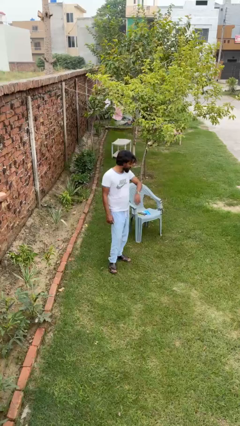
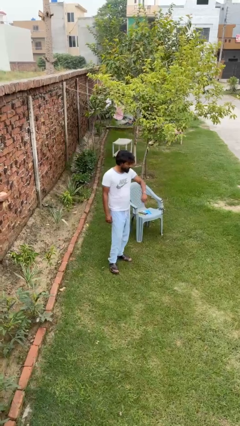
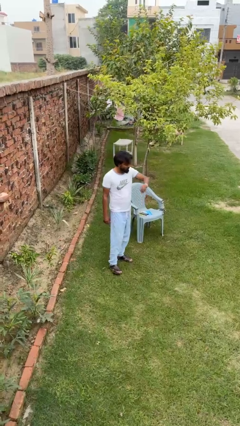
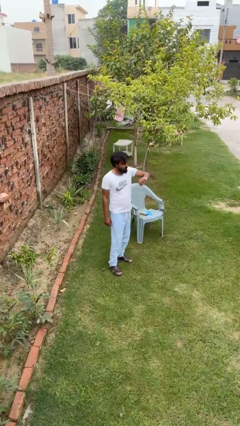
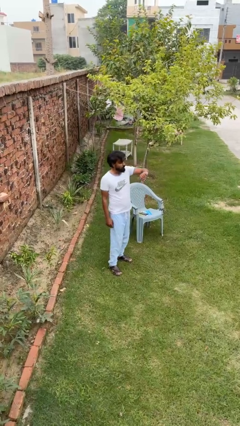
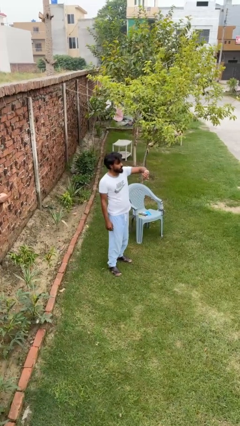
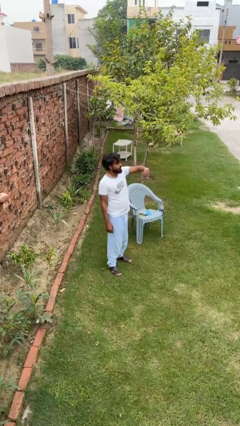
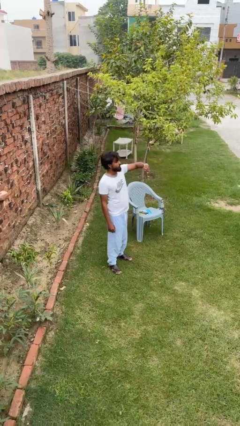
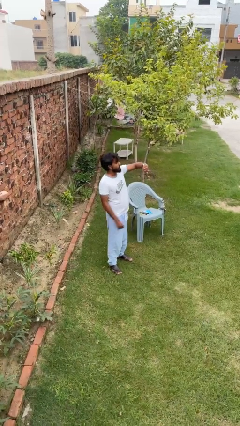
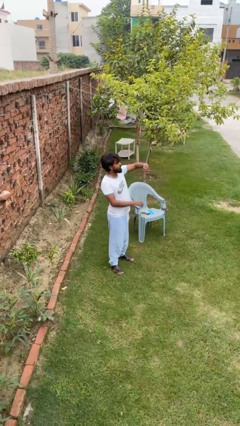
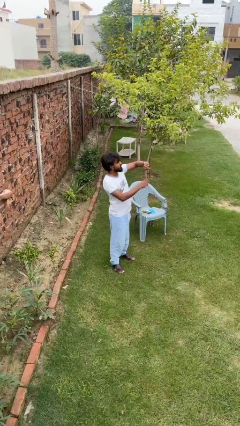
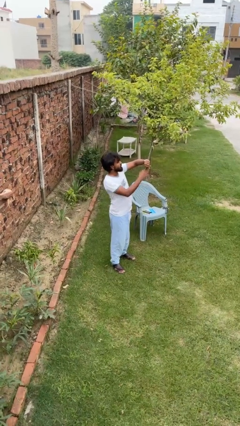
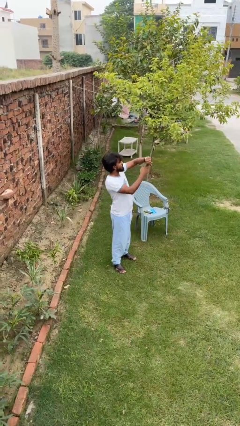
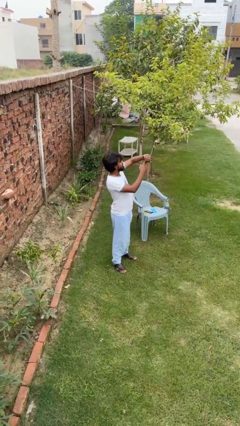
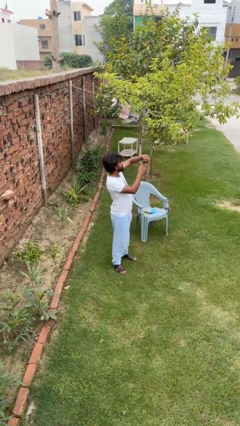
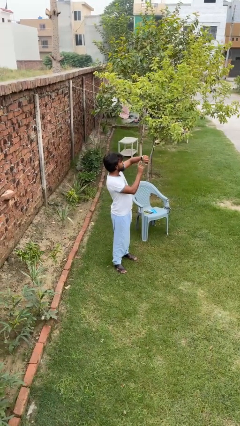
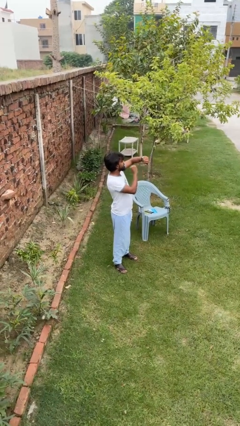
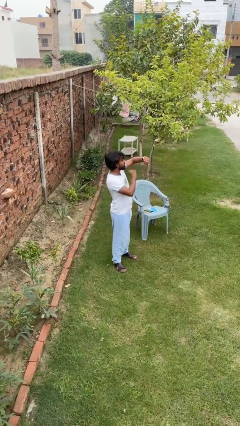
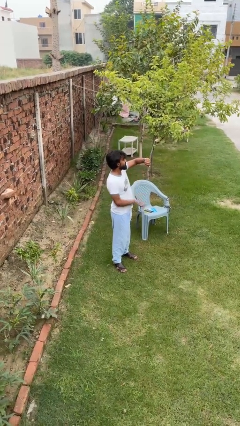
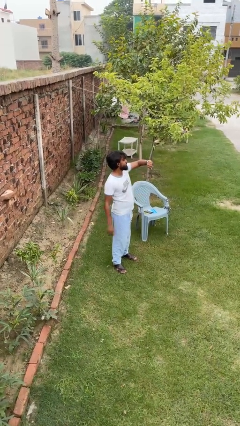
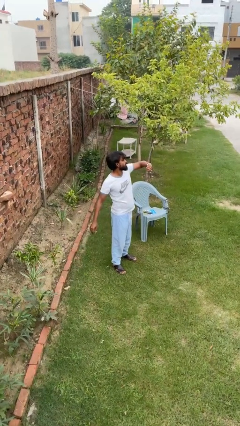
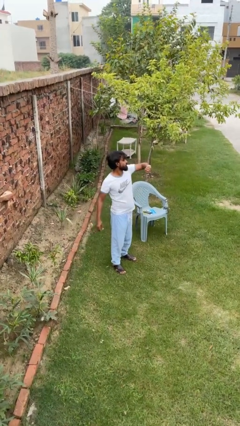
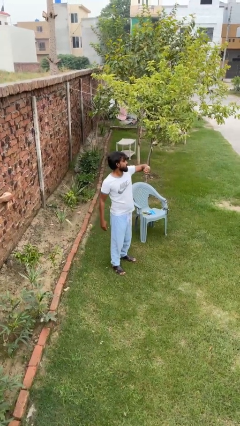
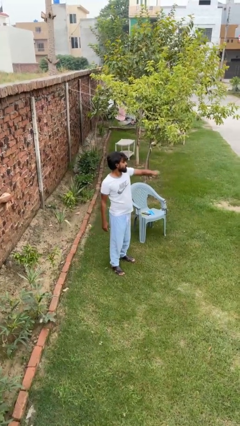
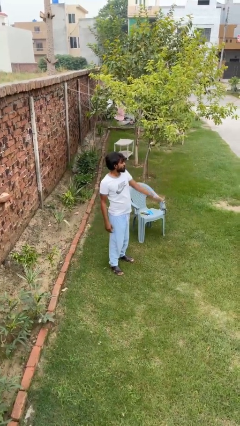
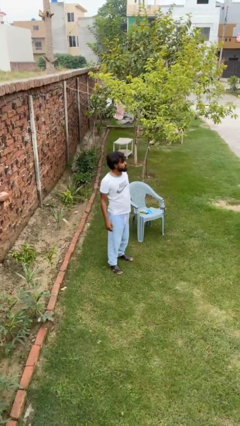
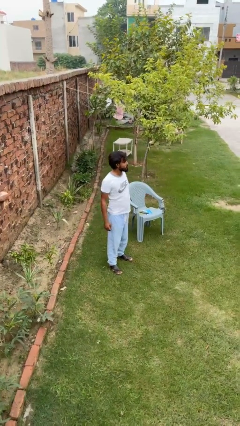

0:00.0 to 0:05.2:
person looks at wristwatch

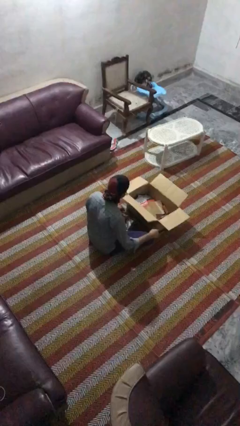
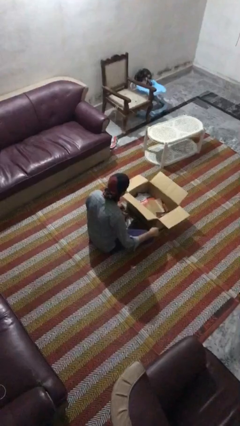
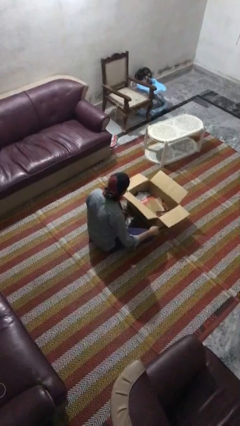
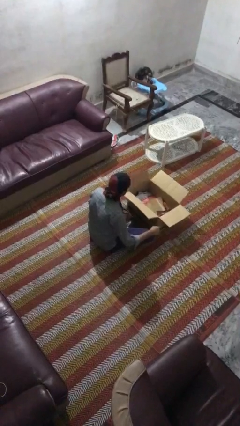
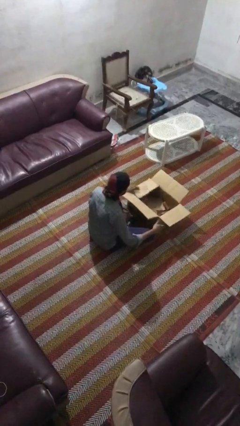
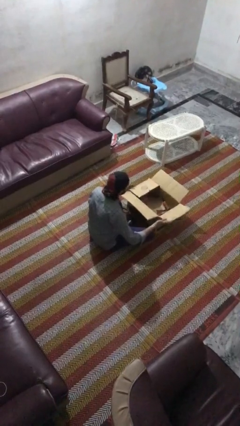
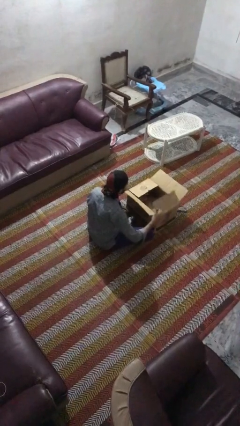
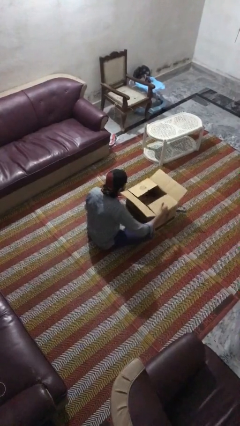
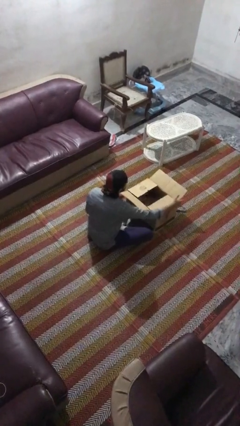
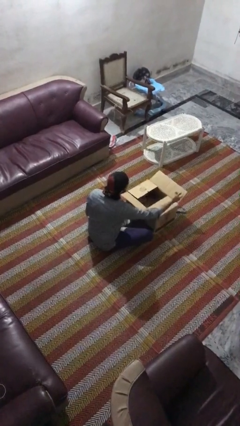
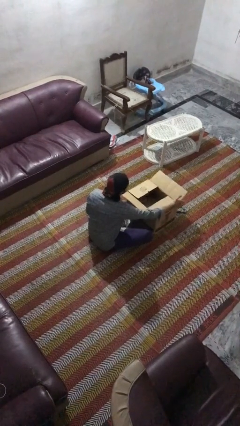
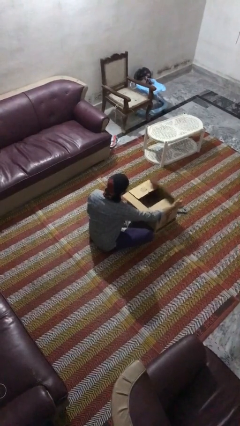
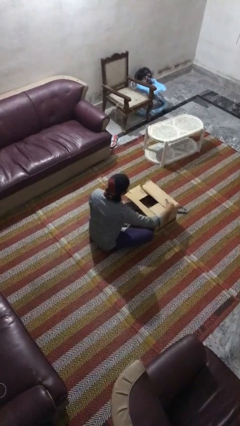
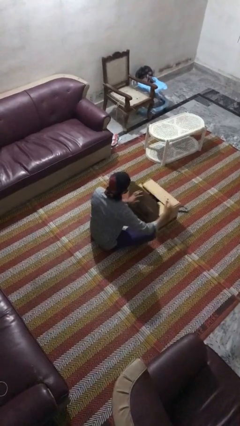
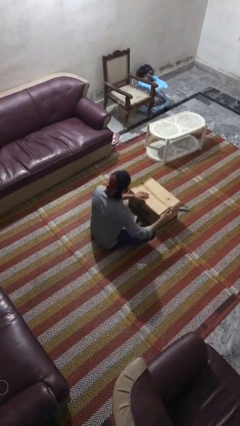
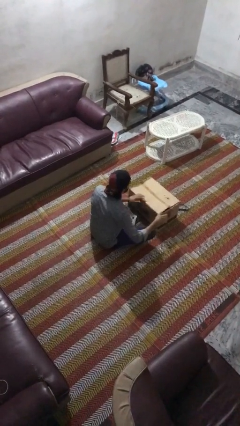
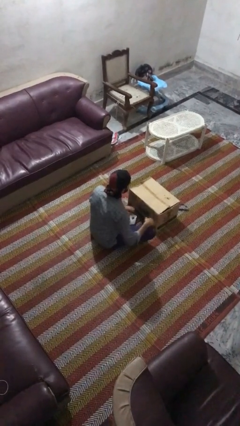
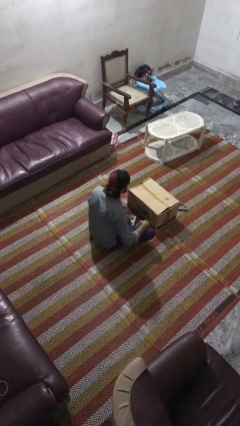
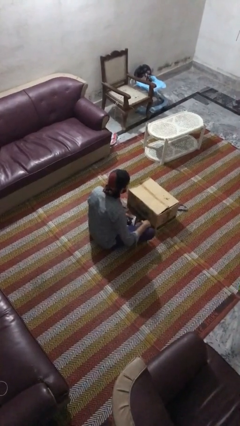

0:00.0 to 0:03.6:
person closes box

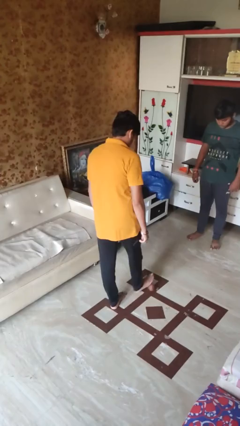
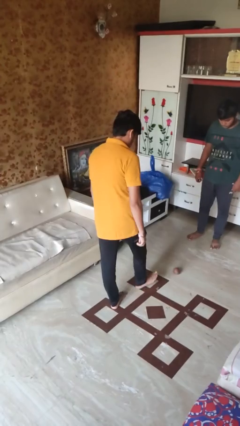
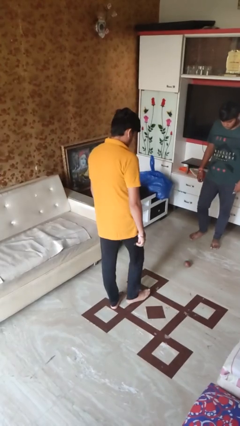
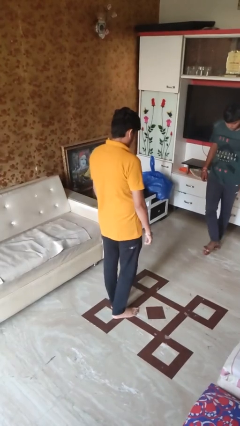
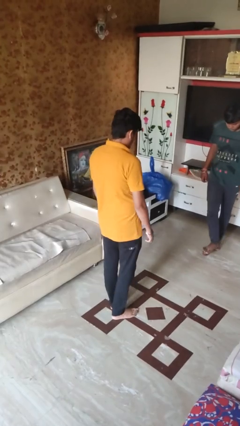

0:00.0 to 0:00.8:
person kicks object to person

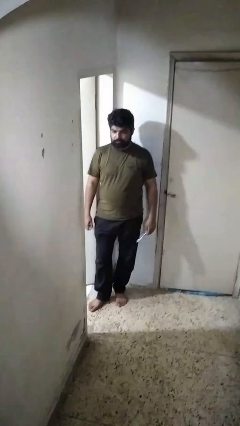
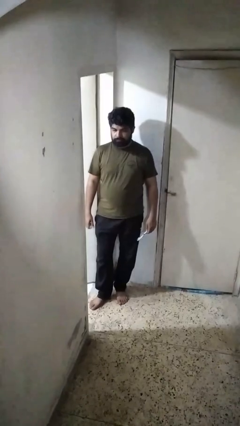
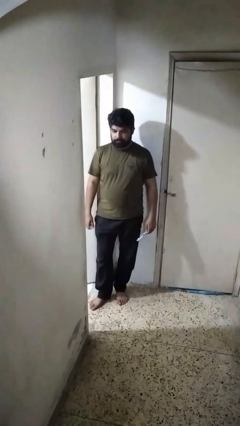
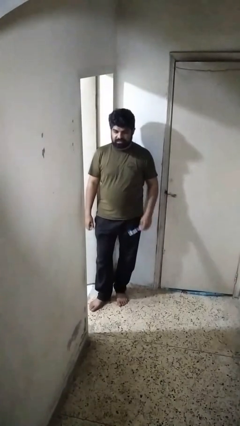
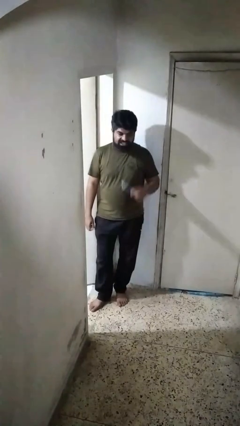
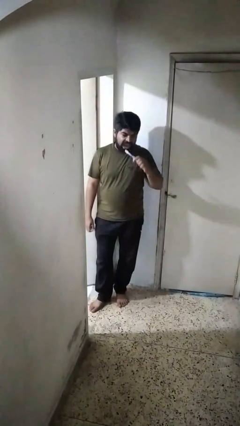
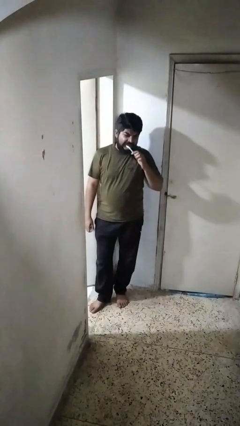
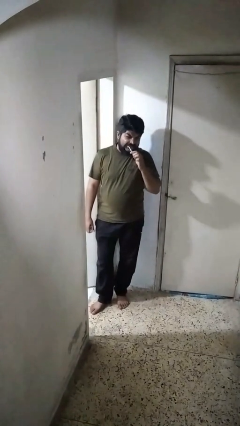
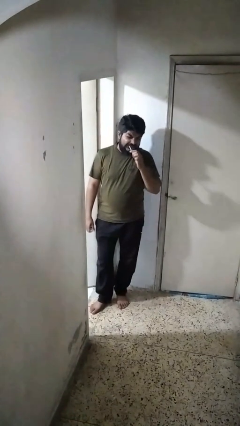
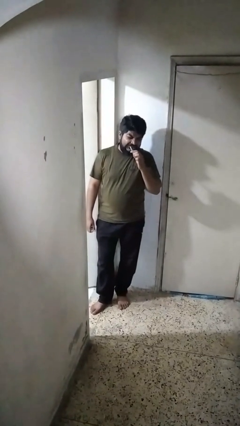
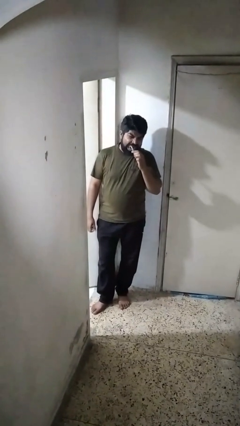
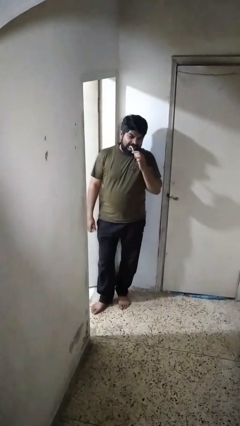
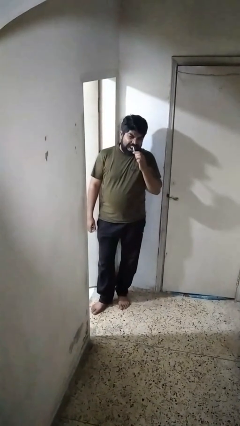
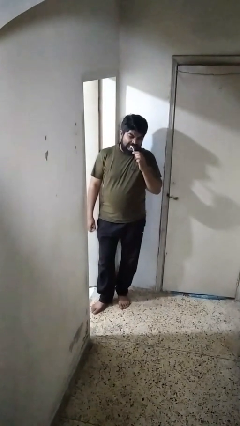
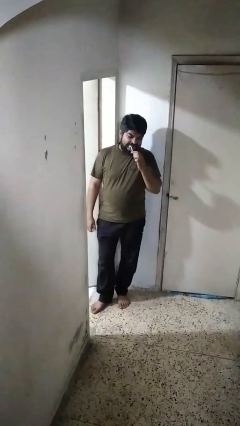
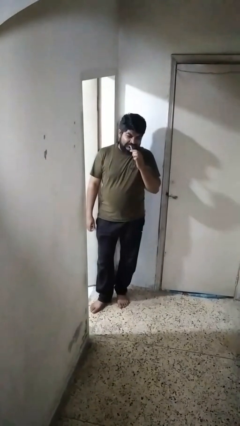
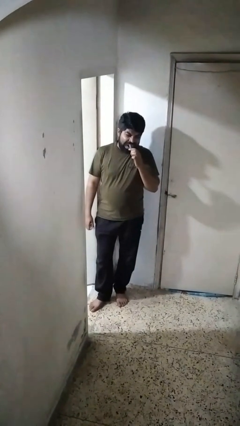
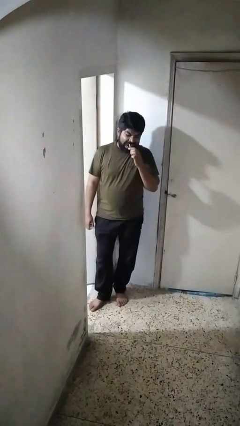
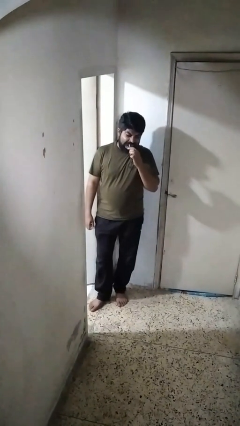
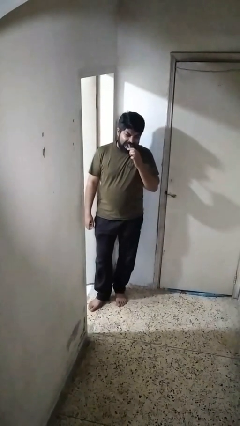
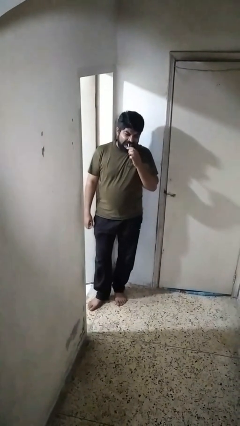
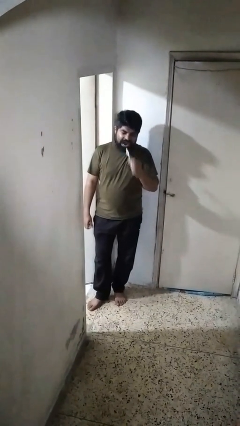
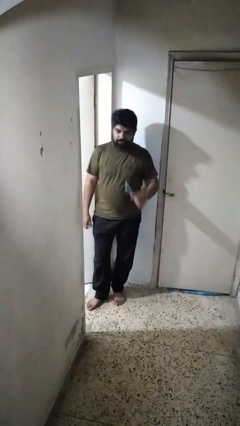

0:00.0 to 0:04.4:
person brushes teeth

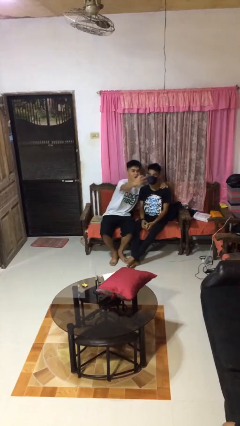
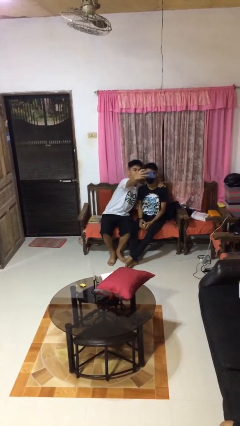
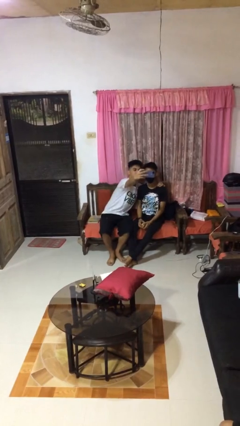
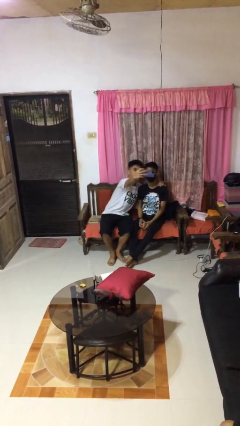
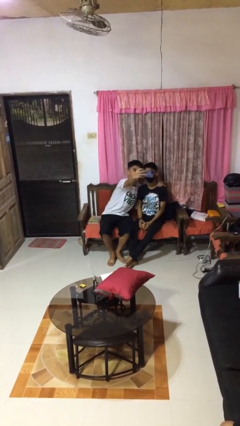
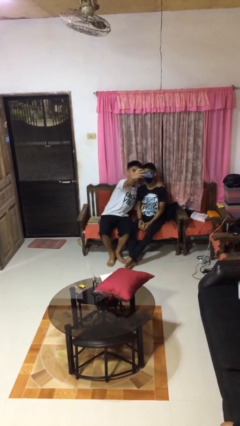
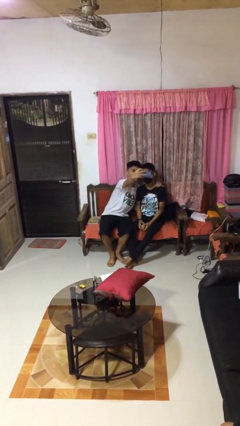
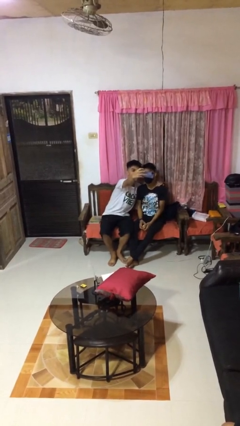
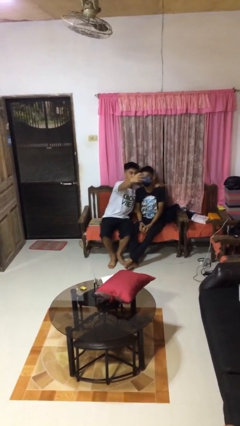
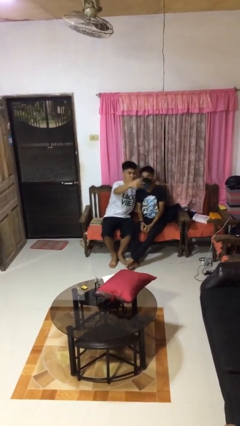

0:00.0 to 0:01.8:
person takes selfie with person

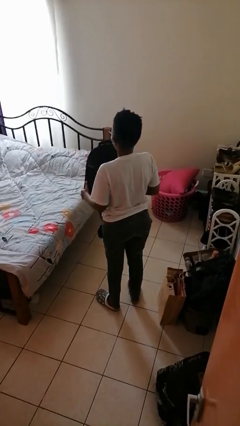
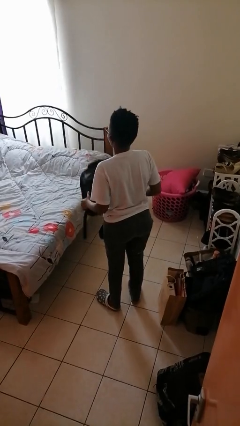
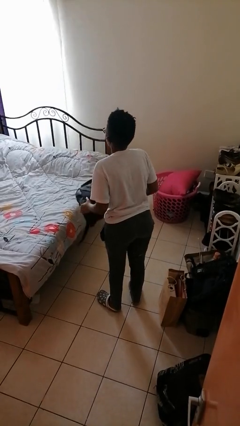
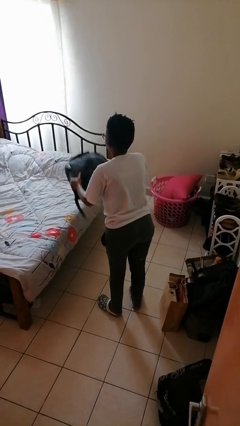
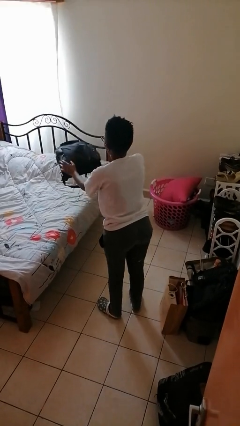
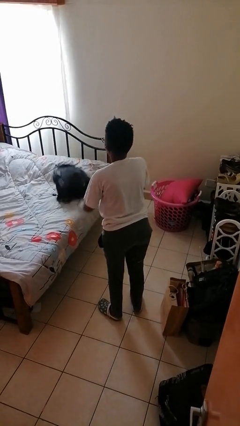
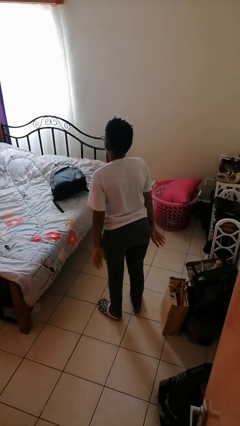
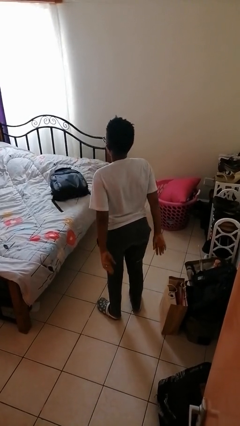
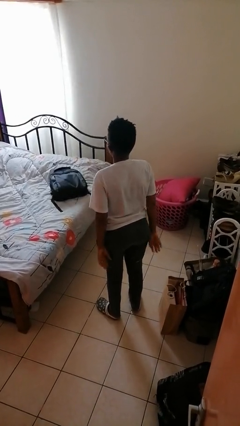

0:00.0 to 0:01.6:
person throws object on bed

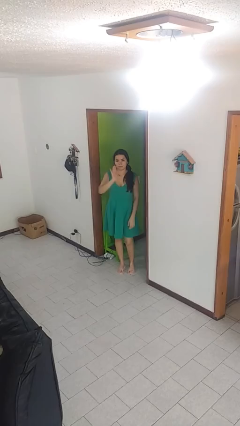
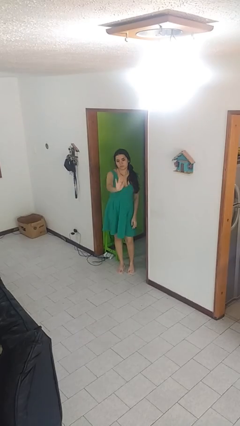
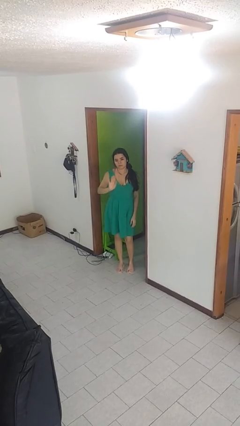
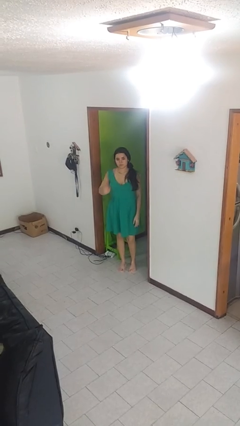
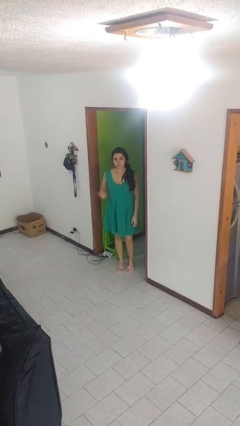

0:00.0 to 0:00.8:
person gestures stop
